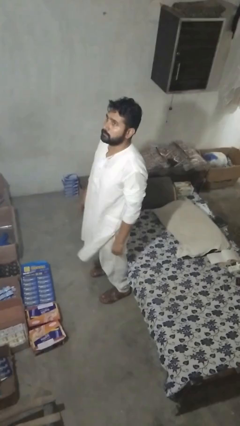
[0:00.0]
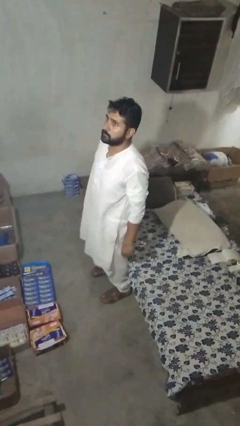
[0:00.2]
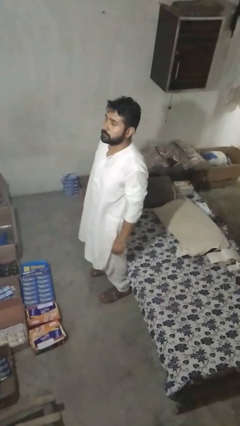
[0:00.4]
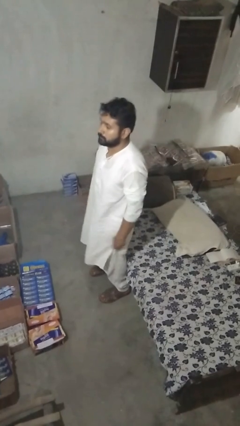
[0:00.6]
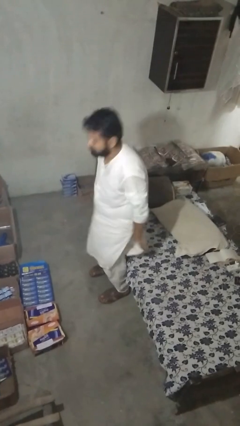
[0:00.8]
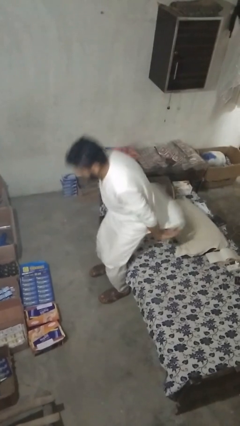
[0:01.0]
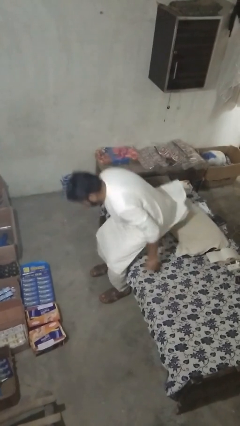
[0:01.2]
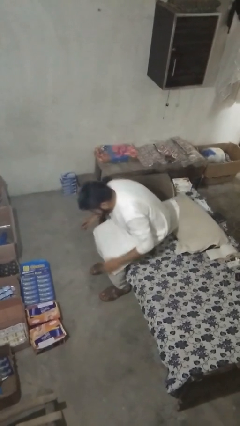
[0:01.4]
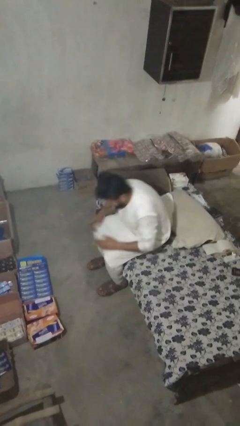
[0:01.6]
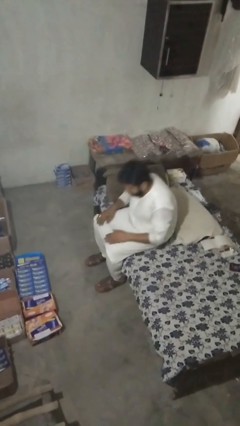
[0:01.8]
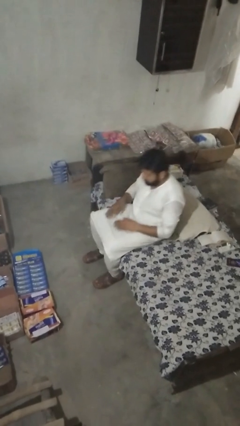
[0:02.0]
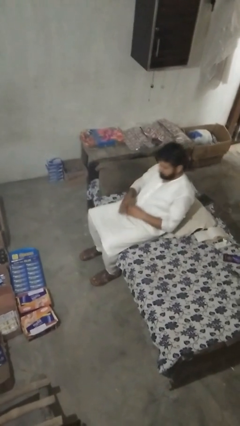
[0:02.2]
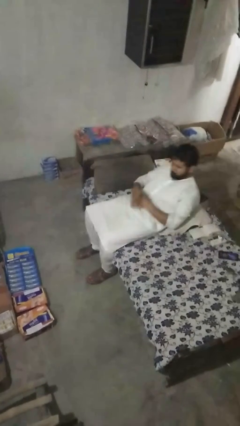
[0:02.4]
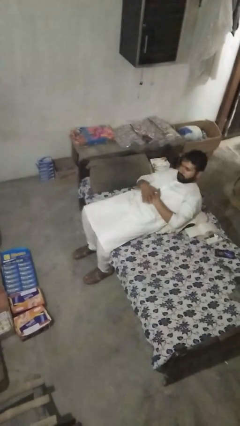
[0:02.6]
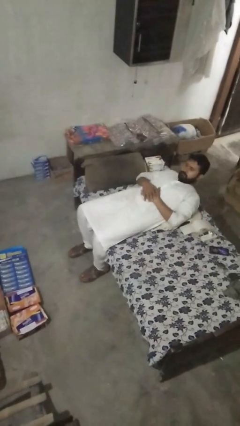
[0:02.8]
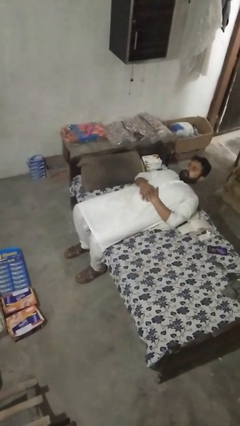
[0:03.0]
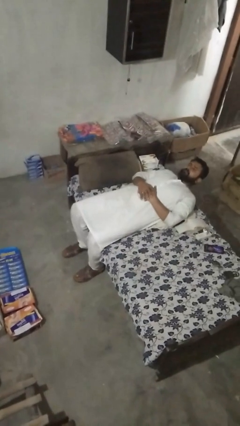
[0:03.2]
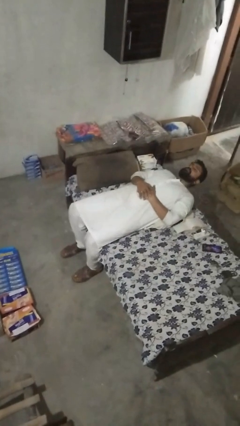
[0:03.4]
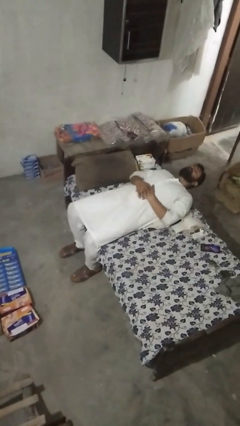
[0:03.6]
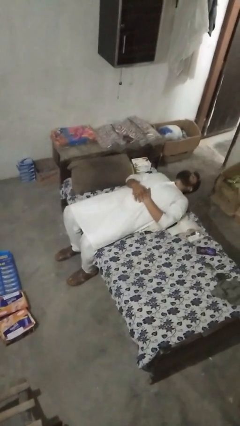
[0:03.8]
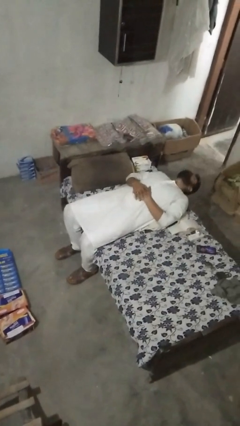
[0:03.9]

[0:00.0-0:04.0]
person lies down on couch

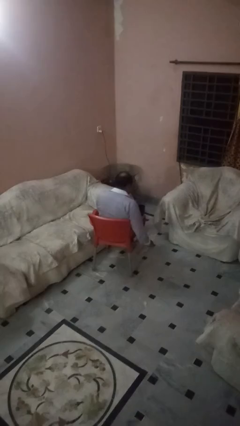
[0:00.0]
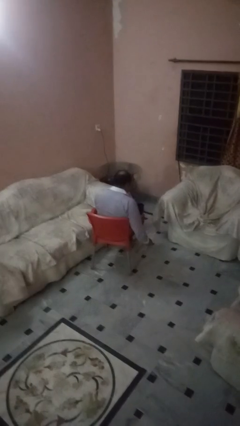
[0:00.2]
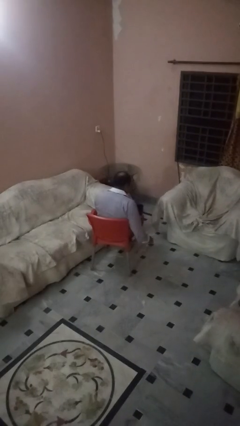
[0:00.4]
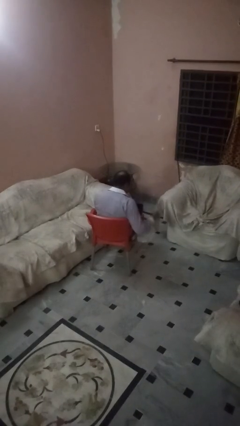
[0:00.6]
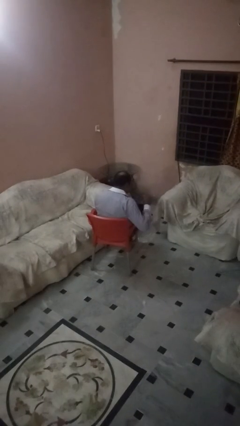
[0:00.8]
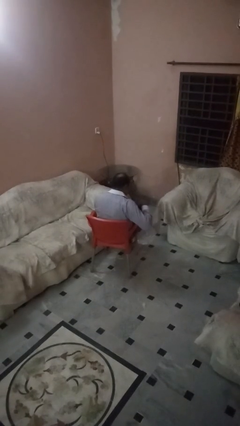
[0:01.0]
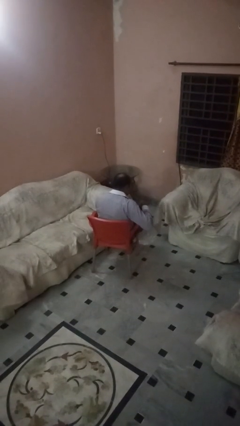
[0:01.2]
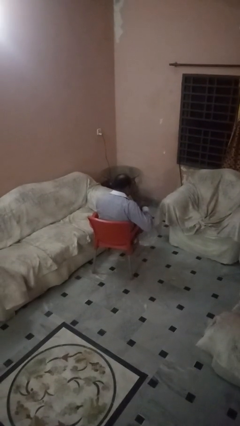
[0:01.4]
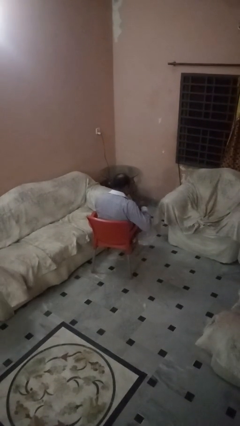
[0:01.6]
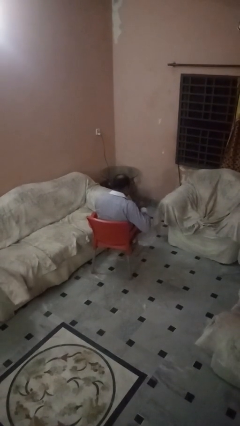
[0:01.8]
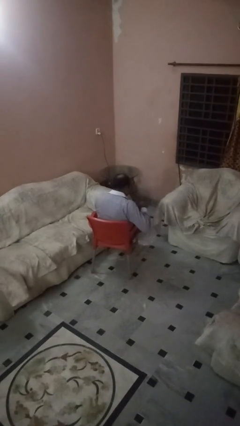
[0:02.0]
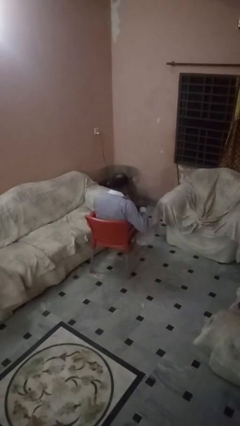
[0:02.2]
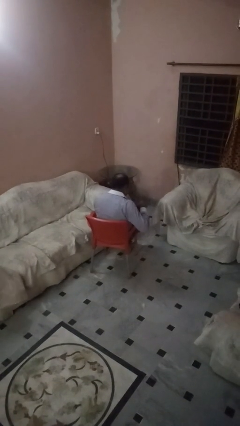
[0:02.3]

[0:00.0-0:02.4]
person stirs mug

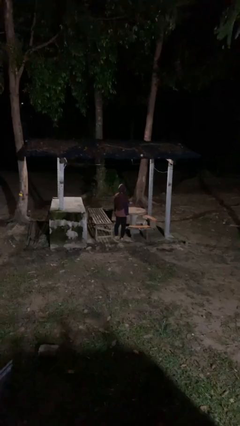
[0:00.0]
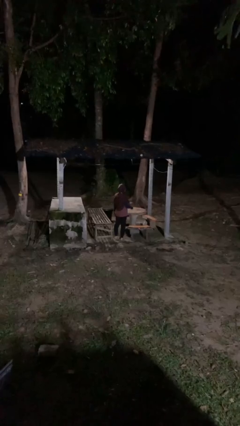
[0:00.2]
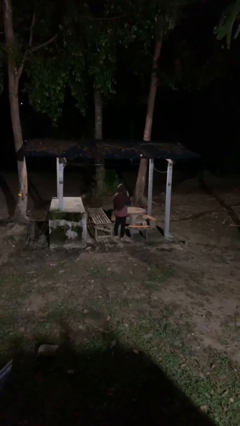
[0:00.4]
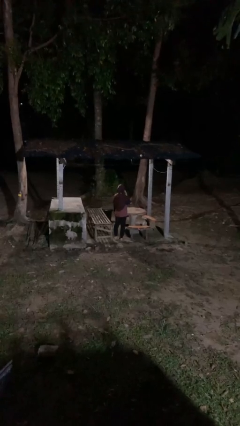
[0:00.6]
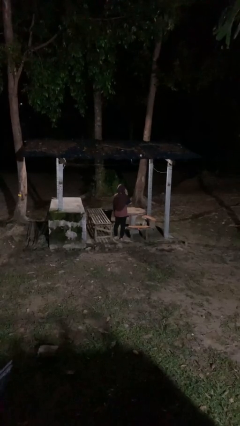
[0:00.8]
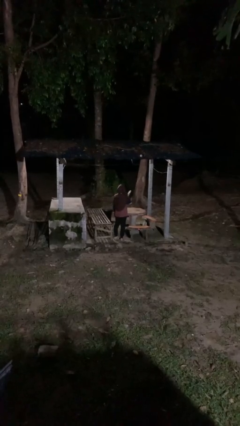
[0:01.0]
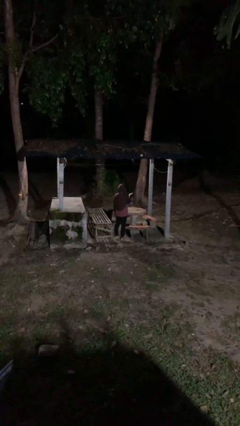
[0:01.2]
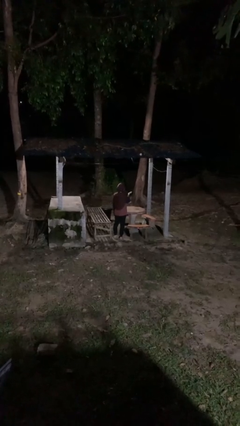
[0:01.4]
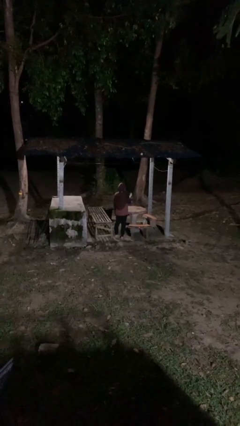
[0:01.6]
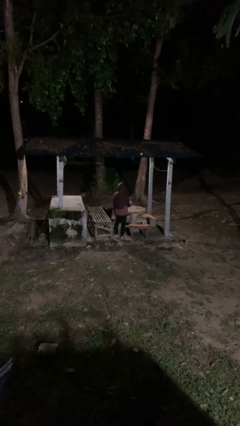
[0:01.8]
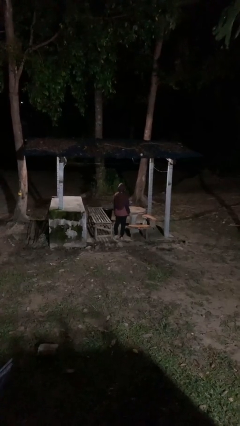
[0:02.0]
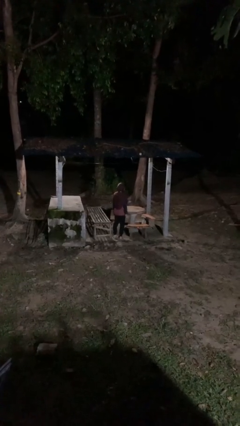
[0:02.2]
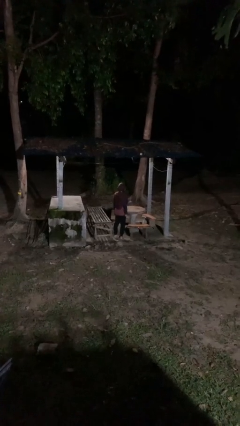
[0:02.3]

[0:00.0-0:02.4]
person gestures blow kiss

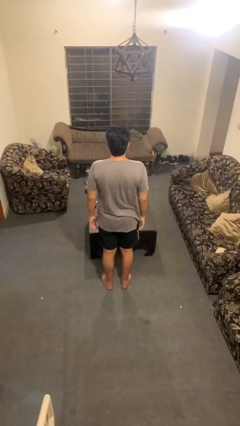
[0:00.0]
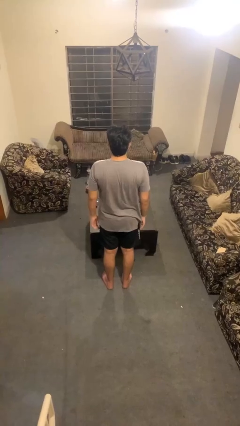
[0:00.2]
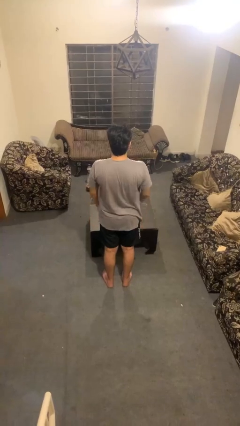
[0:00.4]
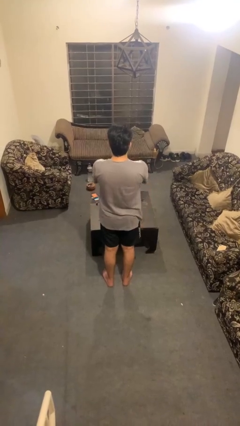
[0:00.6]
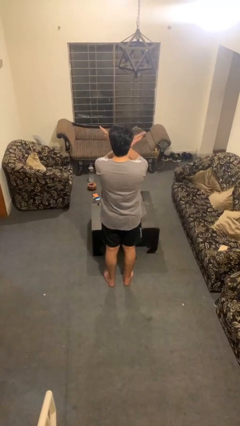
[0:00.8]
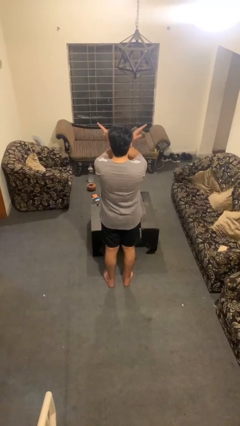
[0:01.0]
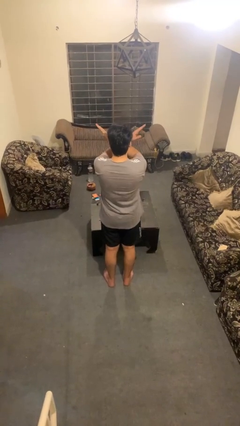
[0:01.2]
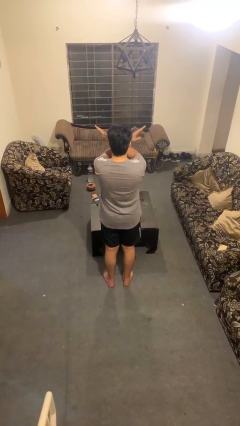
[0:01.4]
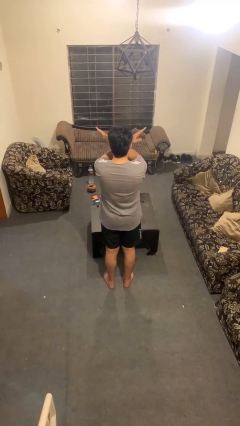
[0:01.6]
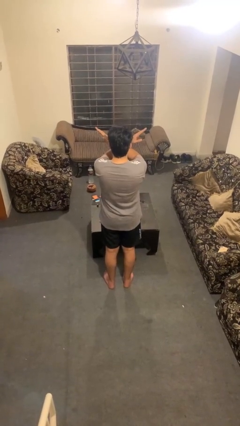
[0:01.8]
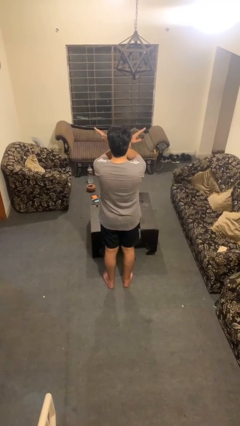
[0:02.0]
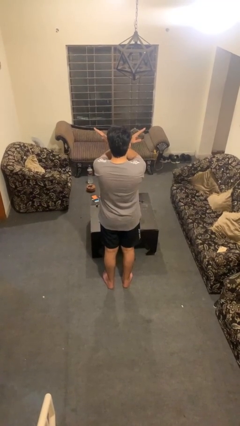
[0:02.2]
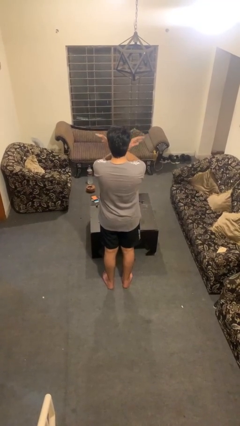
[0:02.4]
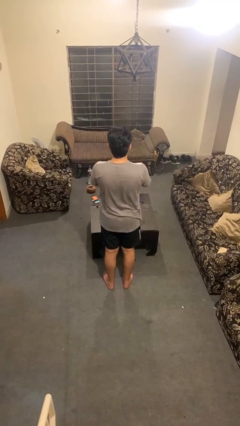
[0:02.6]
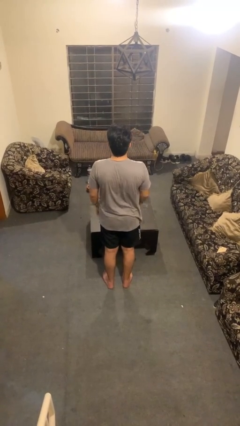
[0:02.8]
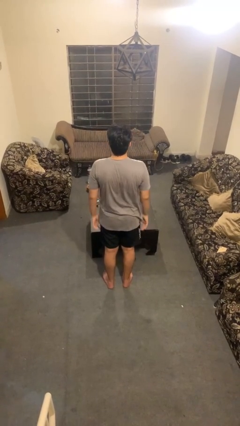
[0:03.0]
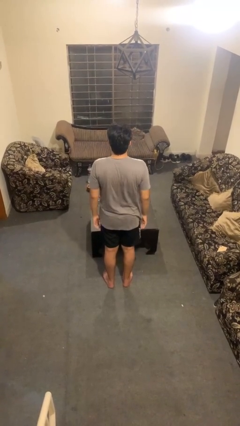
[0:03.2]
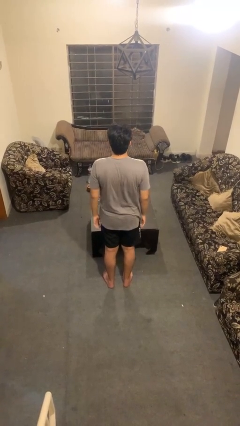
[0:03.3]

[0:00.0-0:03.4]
person gestures arms x

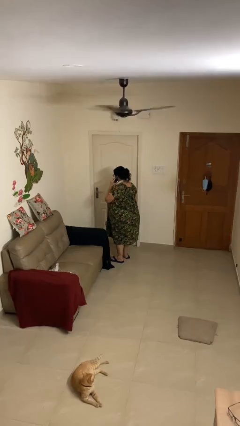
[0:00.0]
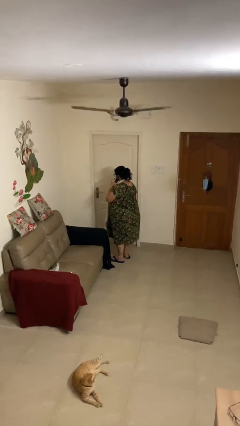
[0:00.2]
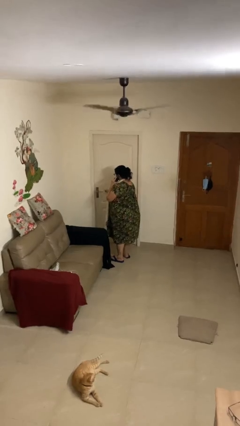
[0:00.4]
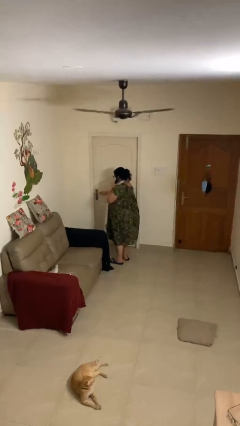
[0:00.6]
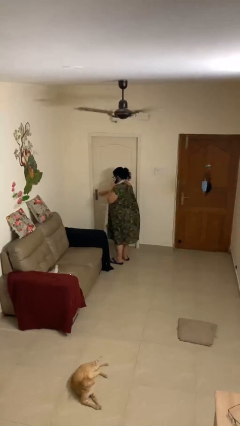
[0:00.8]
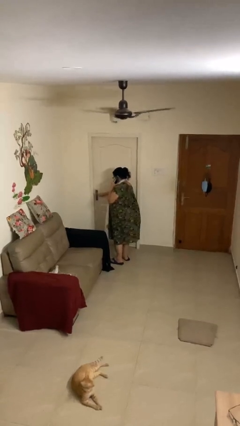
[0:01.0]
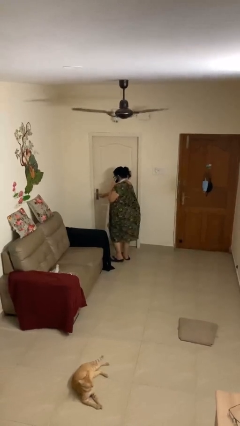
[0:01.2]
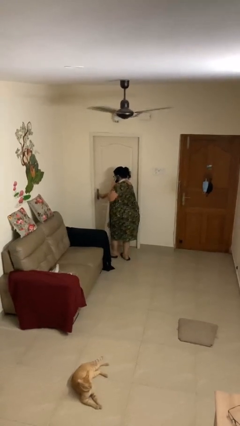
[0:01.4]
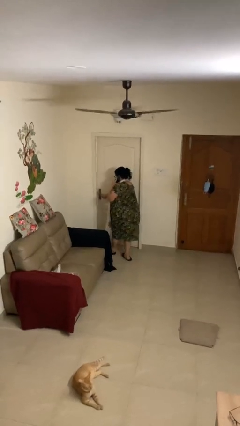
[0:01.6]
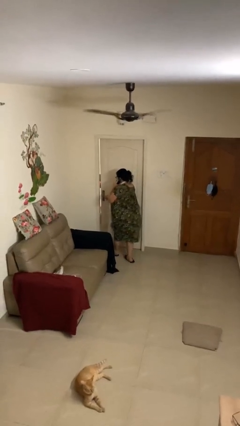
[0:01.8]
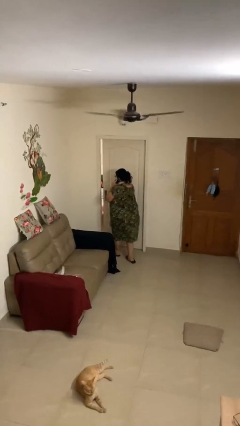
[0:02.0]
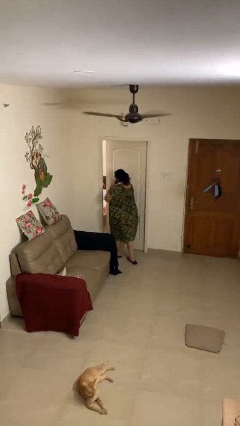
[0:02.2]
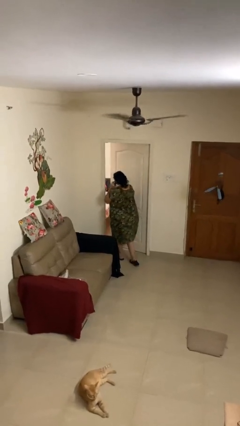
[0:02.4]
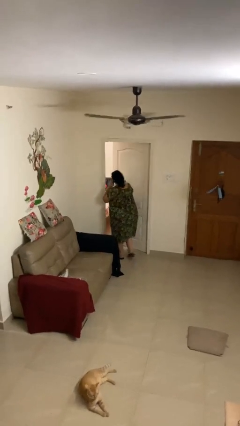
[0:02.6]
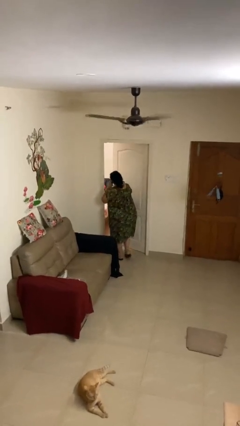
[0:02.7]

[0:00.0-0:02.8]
person opens facility door

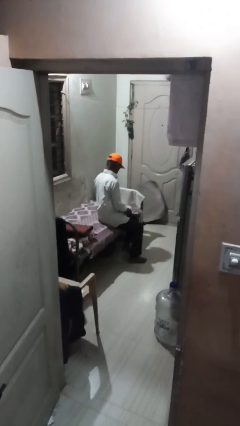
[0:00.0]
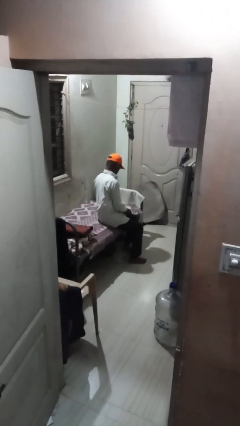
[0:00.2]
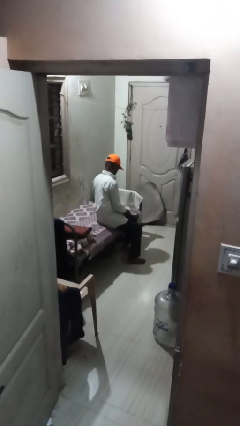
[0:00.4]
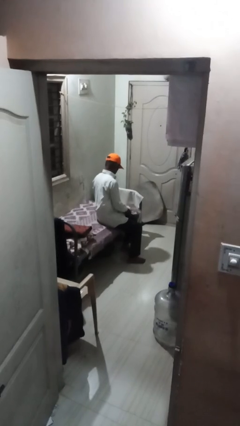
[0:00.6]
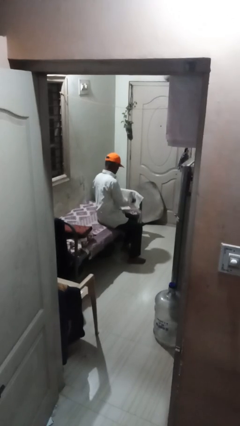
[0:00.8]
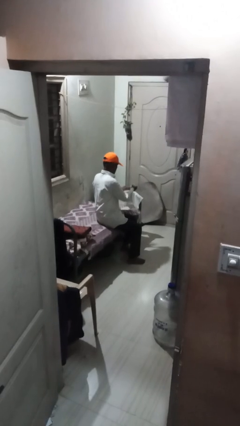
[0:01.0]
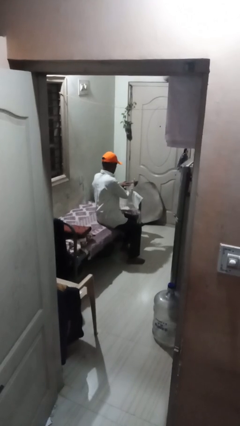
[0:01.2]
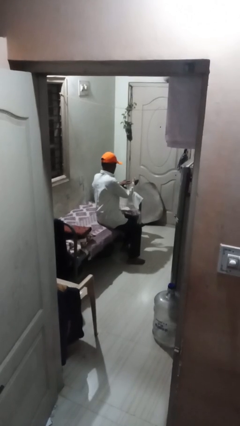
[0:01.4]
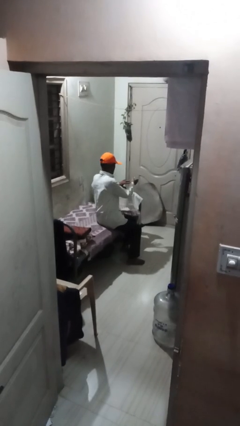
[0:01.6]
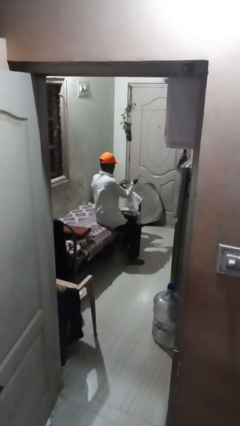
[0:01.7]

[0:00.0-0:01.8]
person clips fingernails

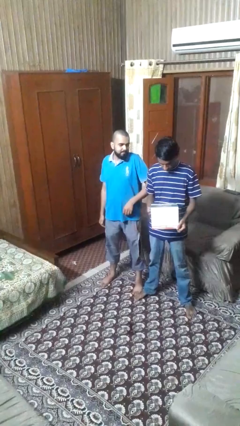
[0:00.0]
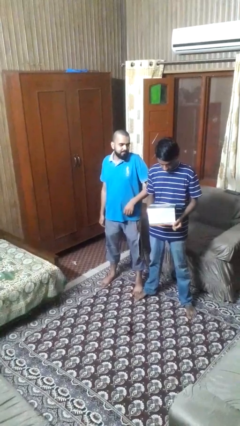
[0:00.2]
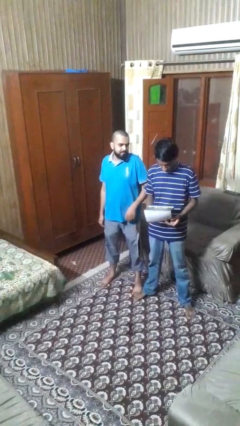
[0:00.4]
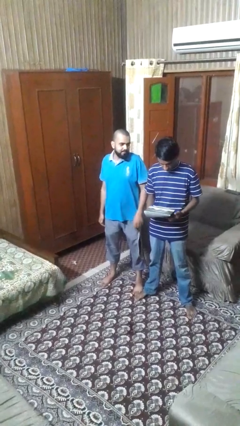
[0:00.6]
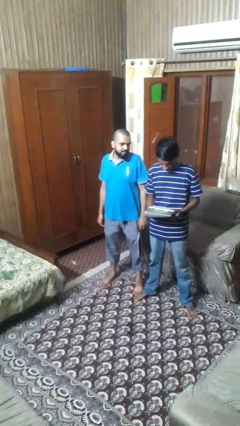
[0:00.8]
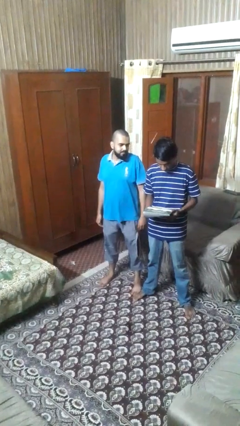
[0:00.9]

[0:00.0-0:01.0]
person nudges person with elbow
